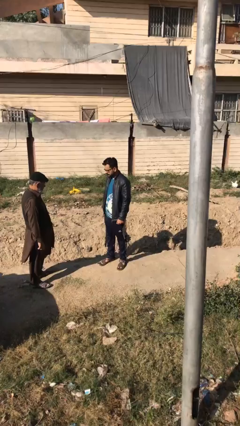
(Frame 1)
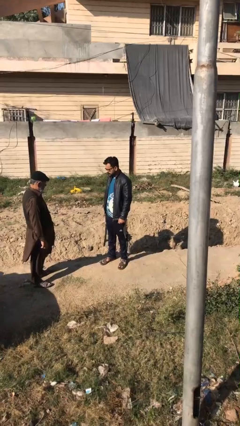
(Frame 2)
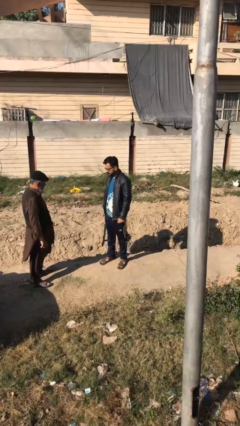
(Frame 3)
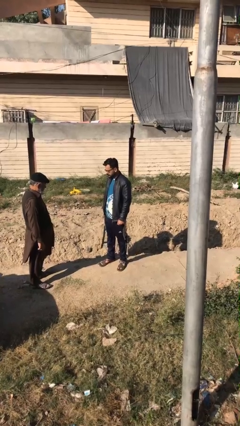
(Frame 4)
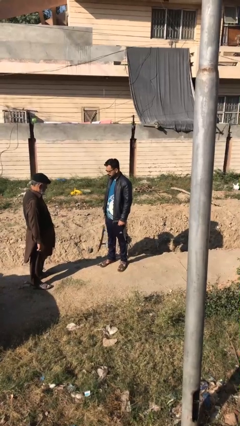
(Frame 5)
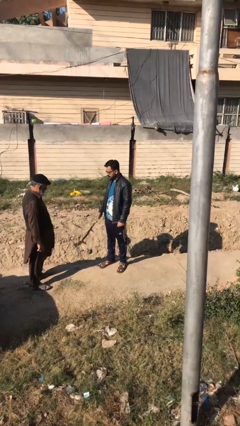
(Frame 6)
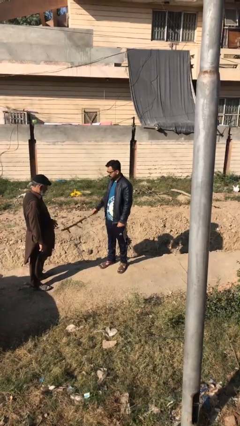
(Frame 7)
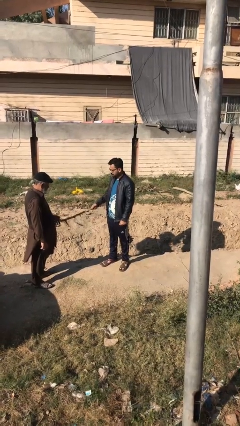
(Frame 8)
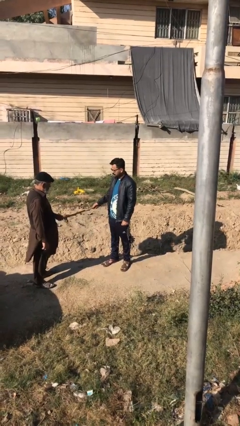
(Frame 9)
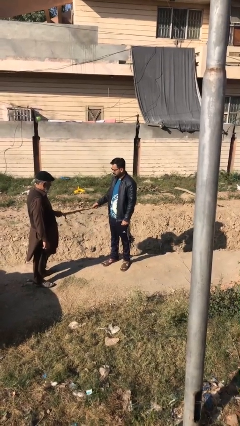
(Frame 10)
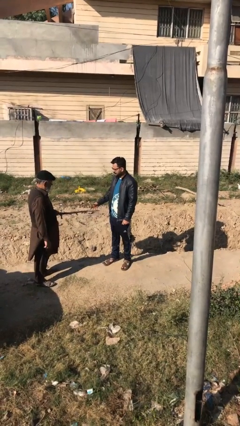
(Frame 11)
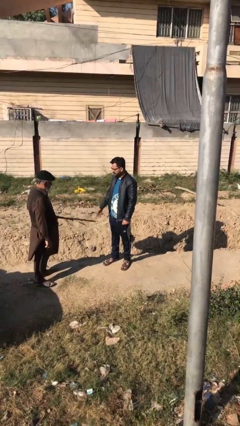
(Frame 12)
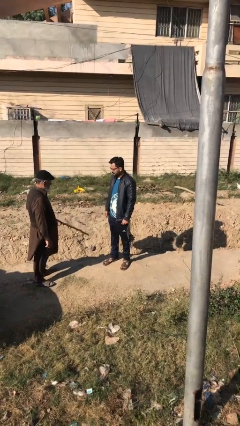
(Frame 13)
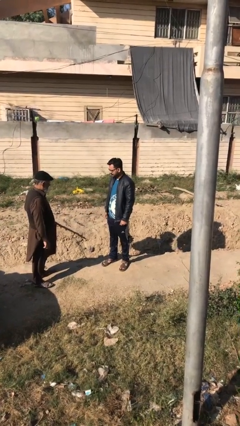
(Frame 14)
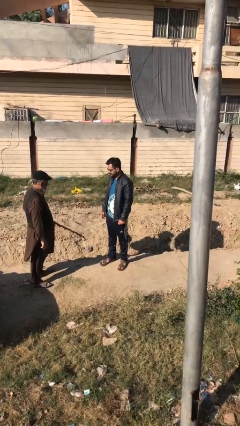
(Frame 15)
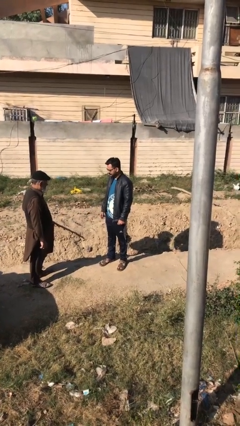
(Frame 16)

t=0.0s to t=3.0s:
person transfers object to person

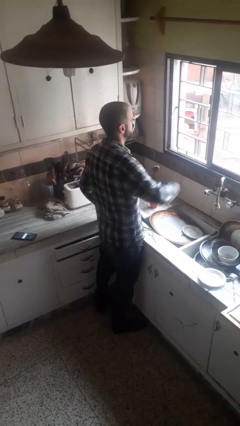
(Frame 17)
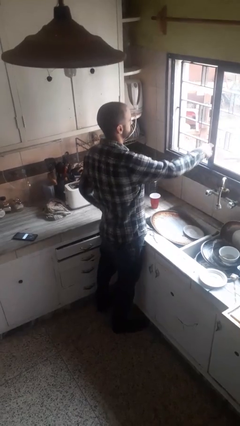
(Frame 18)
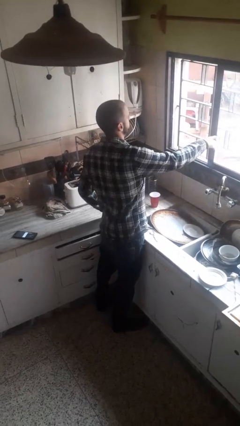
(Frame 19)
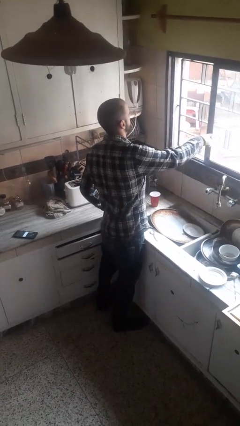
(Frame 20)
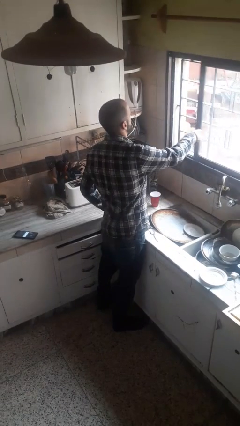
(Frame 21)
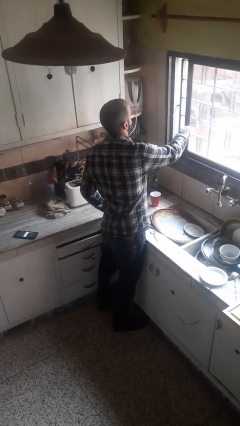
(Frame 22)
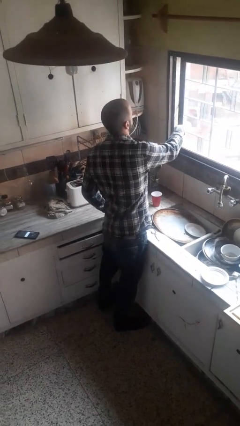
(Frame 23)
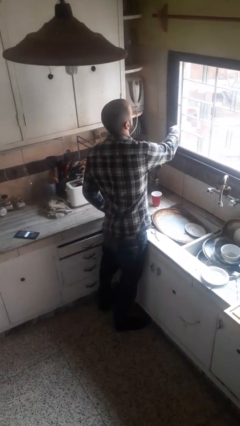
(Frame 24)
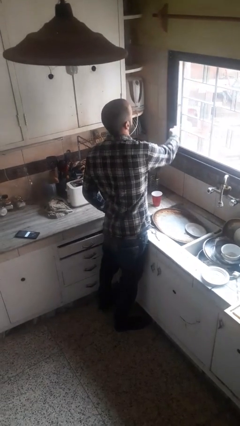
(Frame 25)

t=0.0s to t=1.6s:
person closes home window

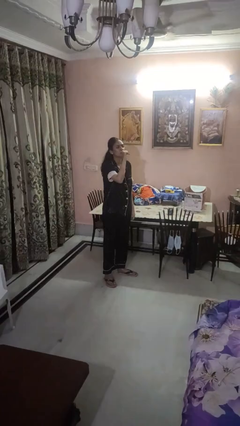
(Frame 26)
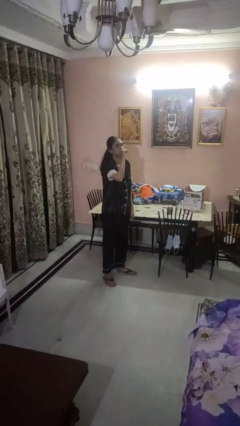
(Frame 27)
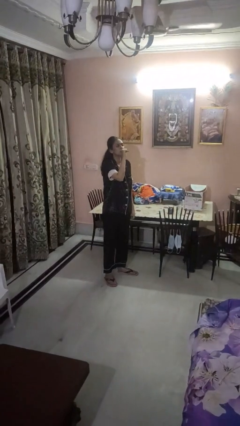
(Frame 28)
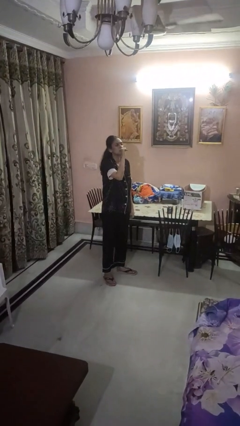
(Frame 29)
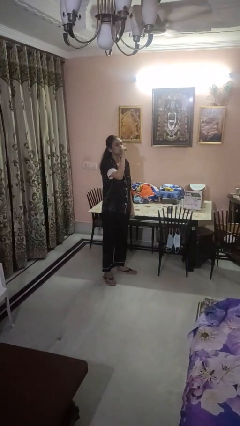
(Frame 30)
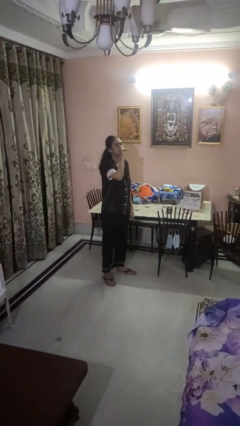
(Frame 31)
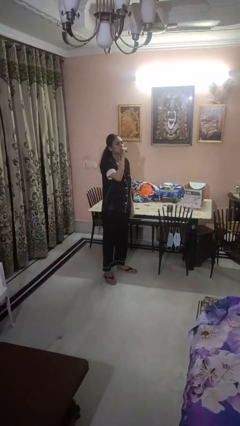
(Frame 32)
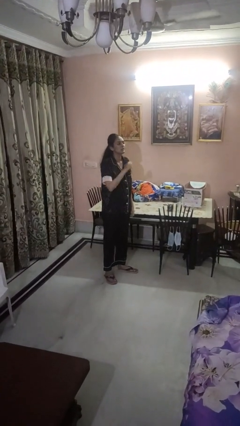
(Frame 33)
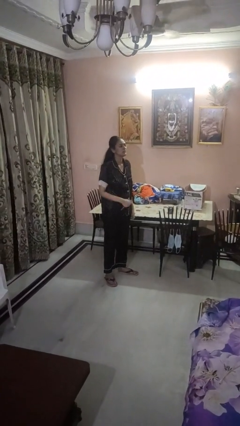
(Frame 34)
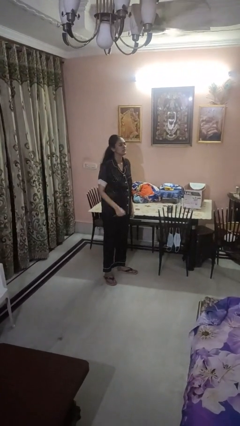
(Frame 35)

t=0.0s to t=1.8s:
person vapes

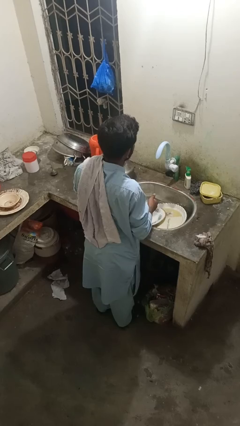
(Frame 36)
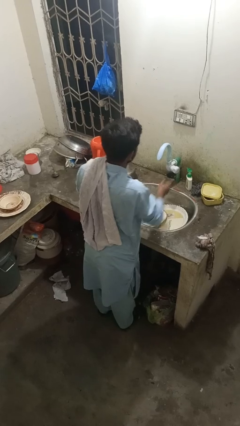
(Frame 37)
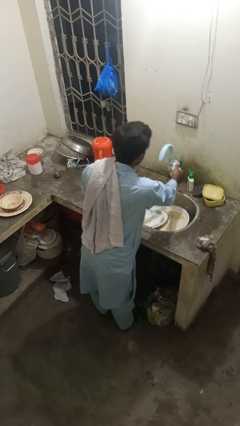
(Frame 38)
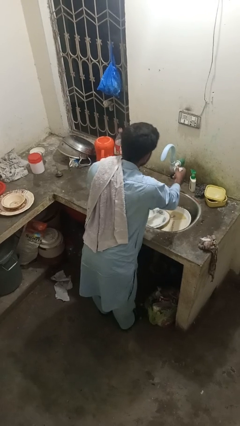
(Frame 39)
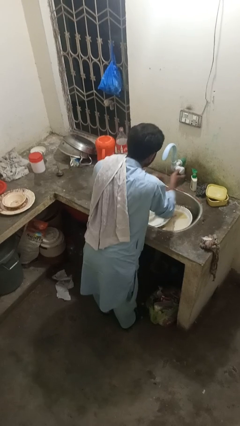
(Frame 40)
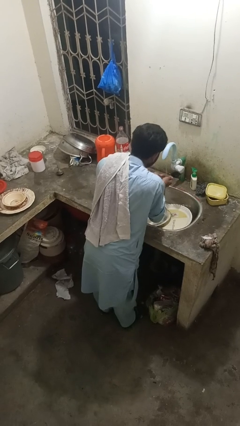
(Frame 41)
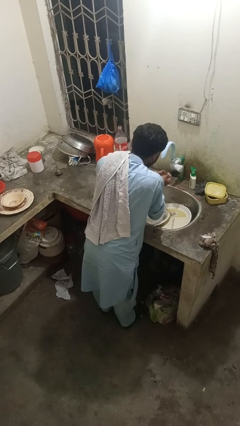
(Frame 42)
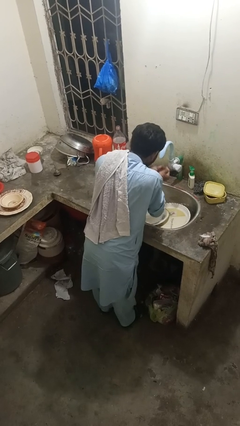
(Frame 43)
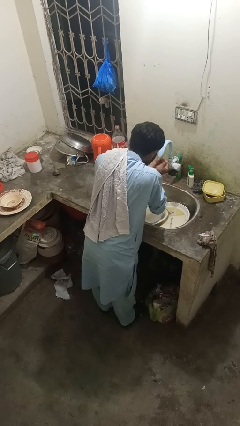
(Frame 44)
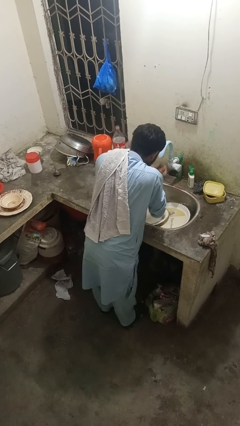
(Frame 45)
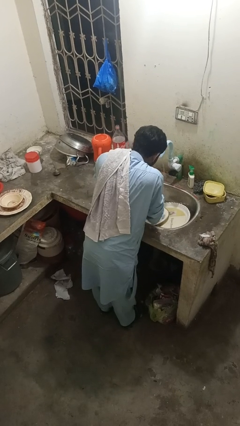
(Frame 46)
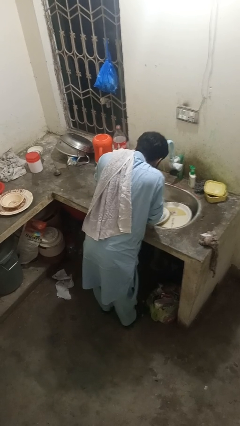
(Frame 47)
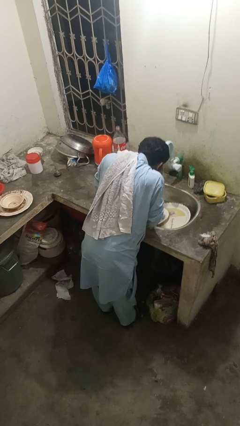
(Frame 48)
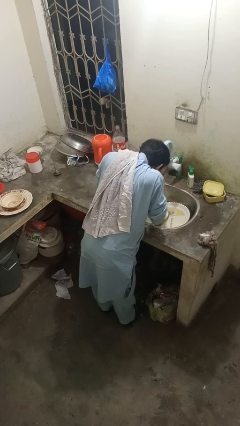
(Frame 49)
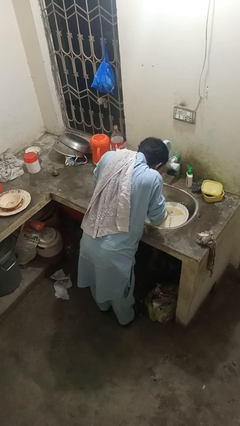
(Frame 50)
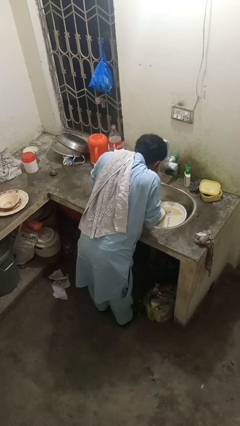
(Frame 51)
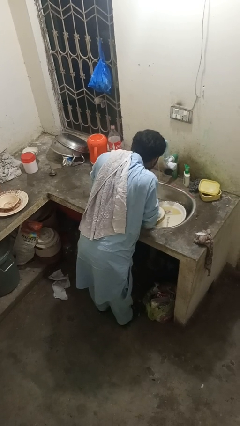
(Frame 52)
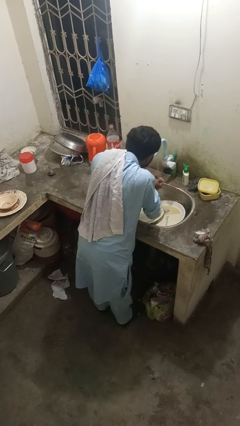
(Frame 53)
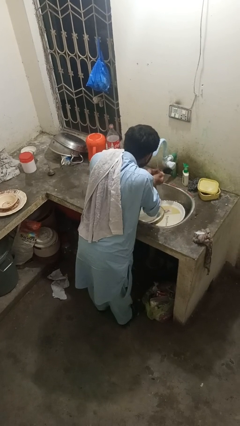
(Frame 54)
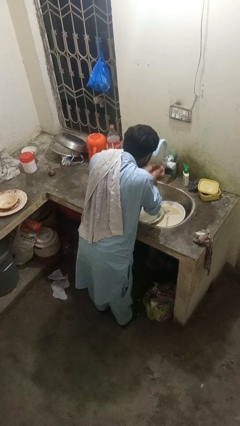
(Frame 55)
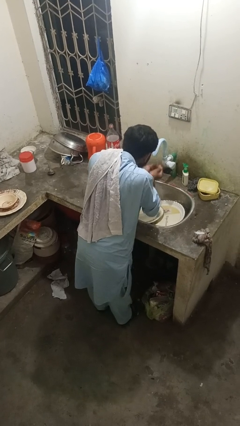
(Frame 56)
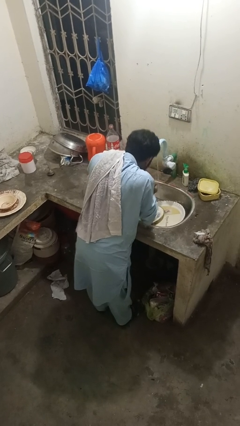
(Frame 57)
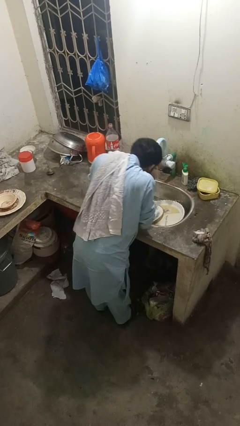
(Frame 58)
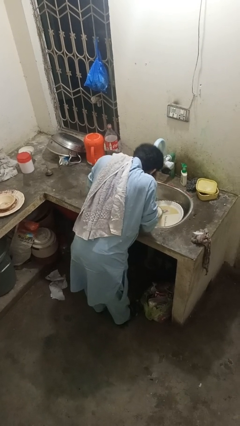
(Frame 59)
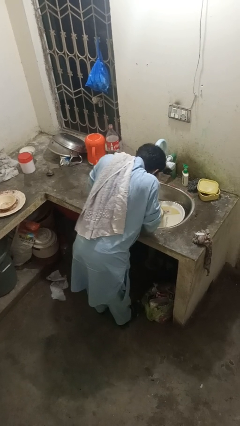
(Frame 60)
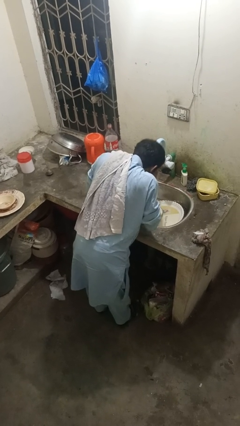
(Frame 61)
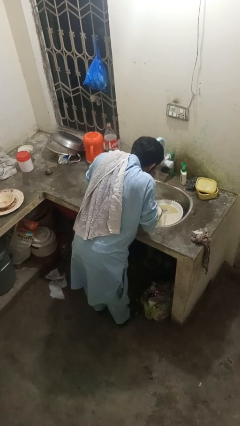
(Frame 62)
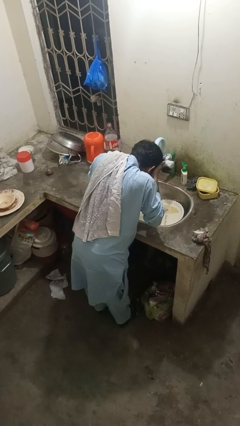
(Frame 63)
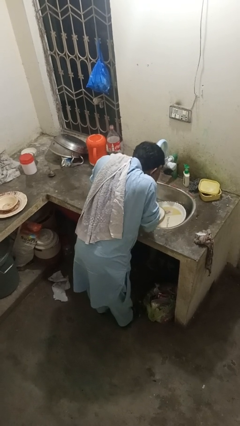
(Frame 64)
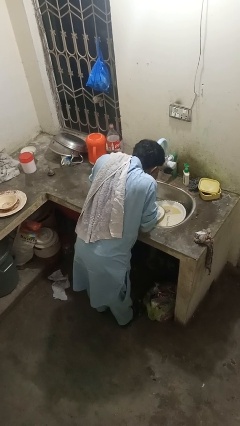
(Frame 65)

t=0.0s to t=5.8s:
person washes face

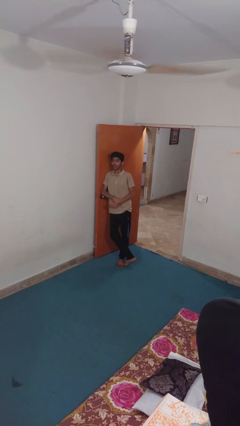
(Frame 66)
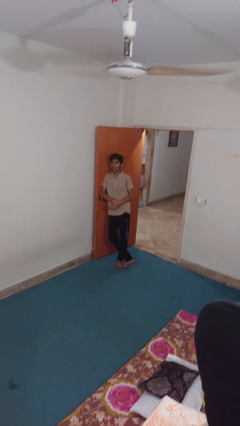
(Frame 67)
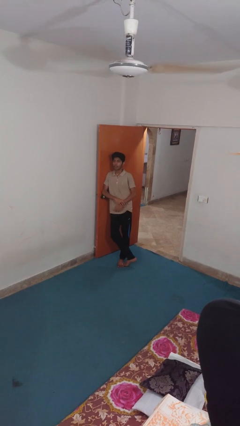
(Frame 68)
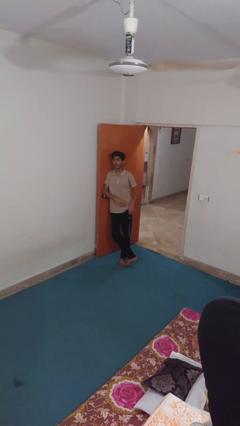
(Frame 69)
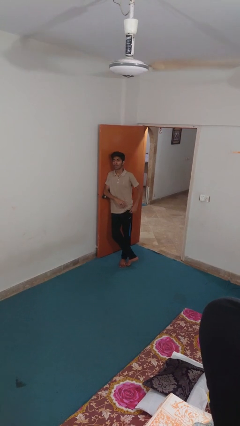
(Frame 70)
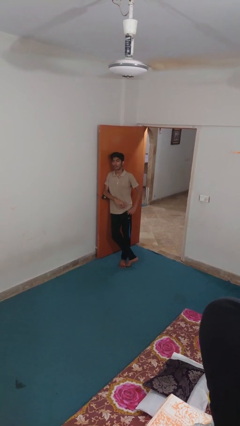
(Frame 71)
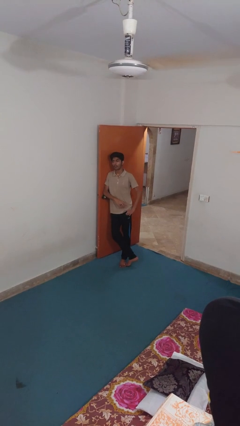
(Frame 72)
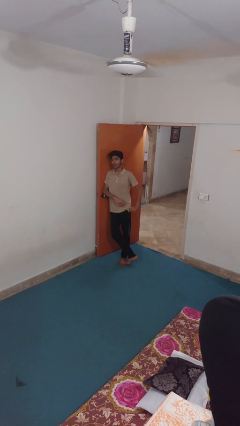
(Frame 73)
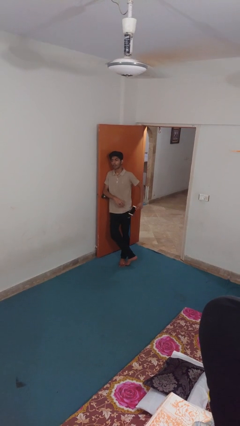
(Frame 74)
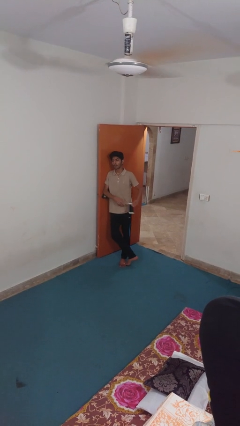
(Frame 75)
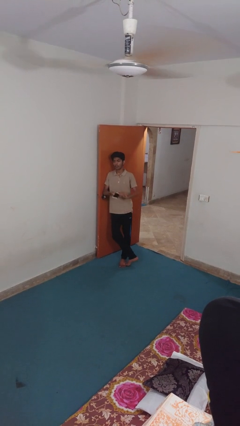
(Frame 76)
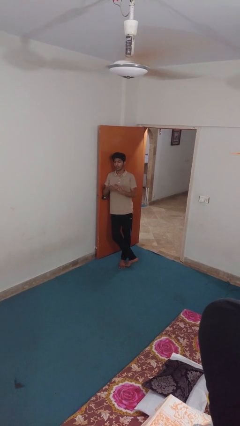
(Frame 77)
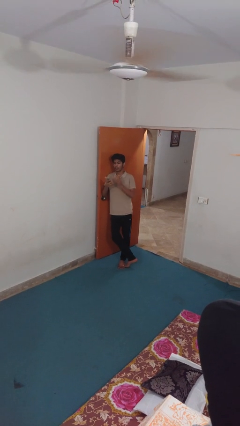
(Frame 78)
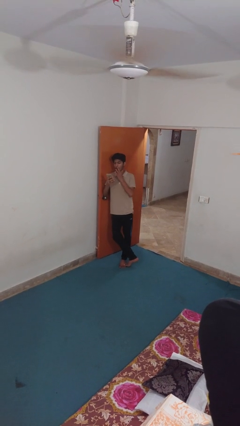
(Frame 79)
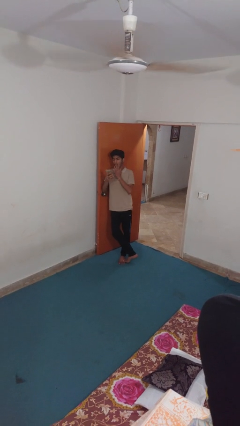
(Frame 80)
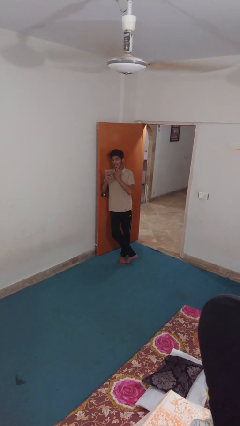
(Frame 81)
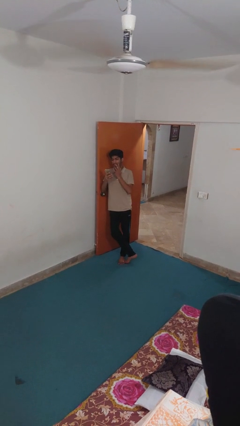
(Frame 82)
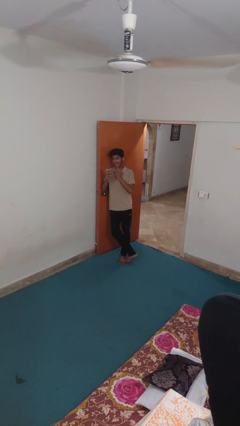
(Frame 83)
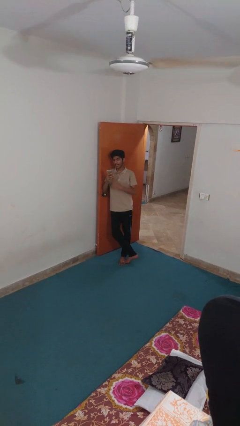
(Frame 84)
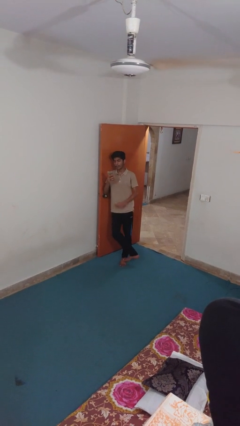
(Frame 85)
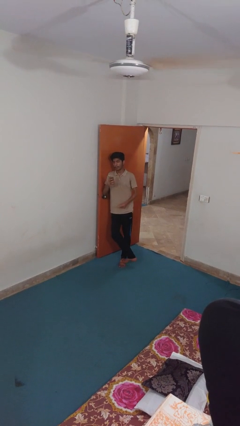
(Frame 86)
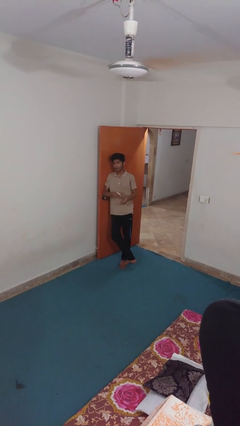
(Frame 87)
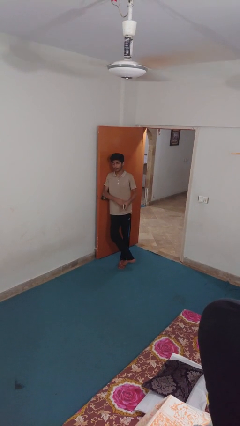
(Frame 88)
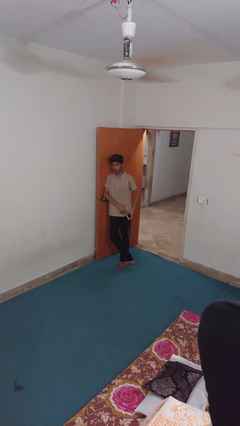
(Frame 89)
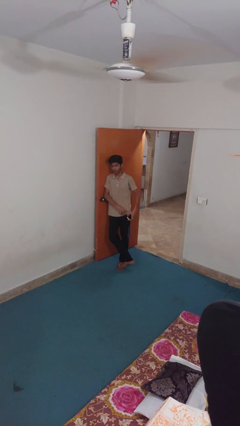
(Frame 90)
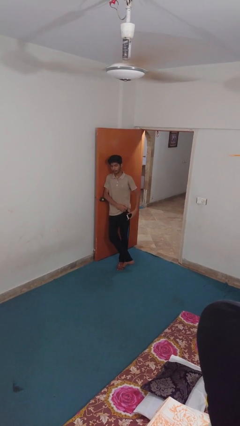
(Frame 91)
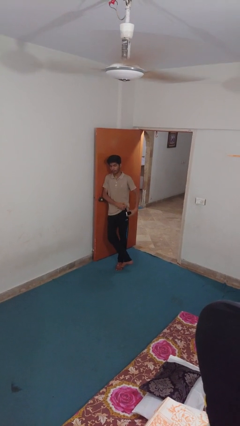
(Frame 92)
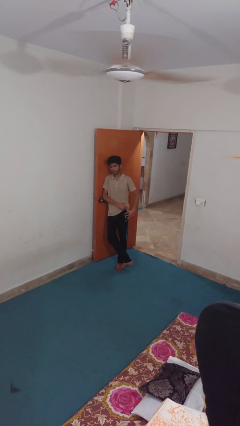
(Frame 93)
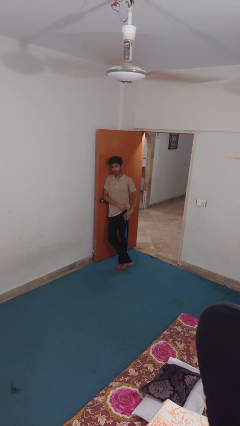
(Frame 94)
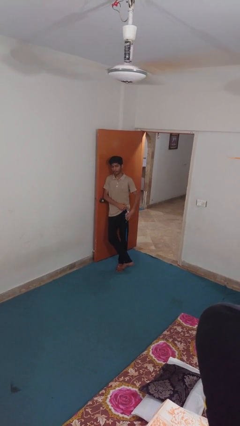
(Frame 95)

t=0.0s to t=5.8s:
person takes phone from pocket
